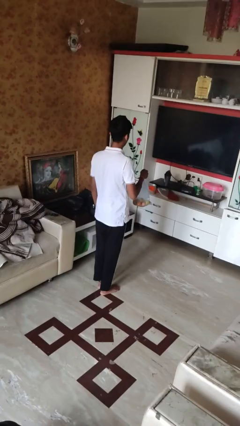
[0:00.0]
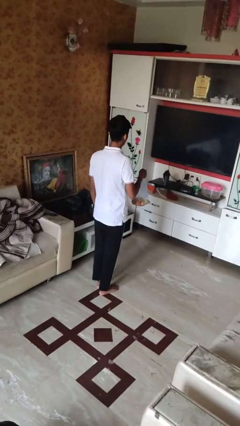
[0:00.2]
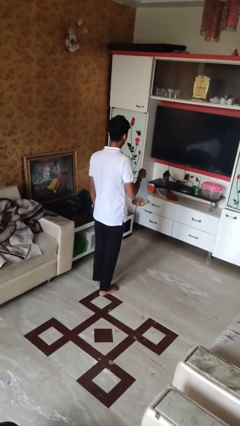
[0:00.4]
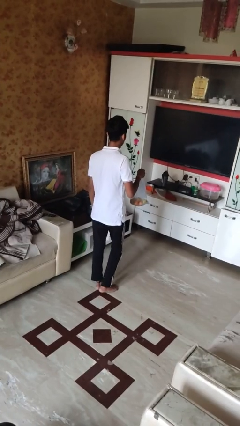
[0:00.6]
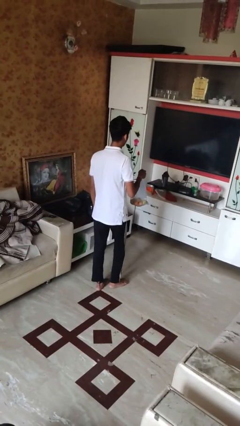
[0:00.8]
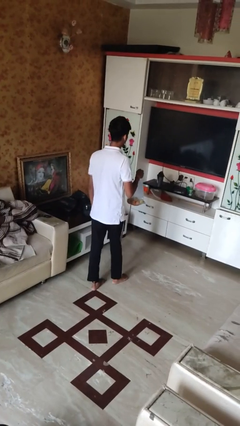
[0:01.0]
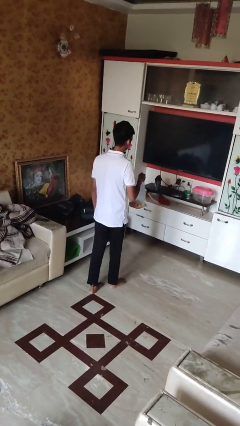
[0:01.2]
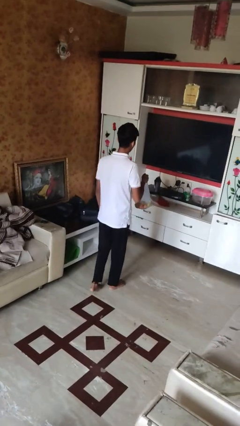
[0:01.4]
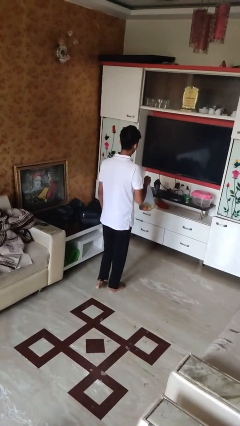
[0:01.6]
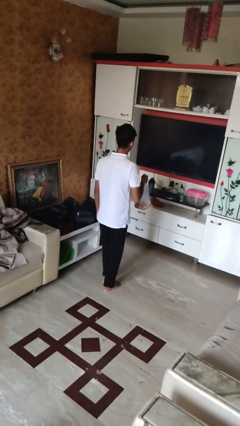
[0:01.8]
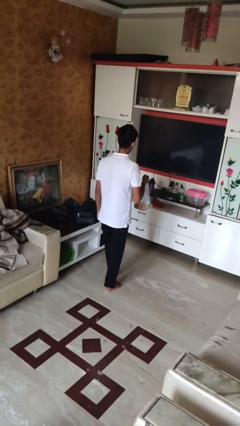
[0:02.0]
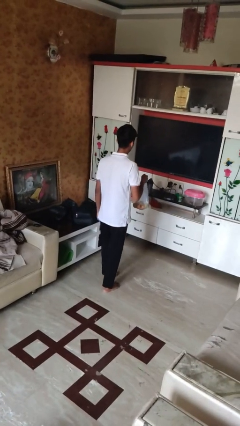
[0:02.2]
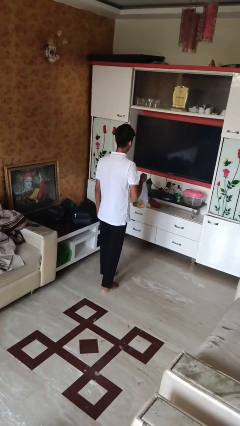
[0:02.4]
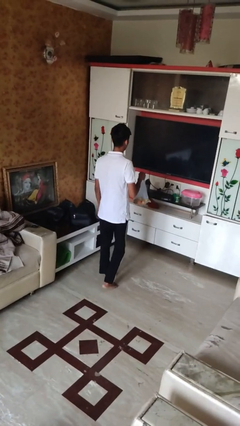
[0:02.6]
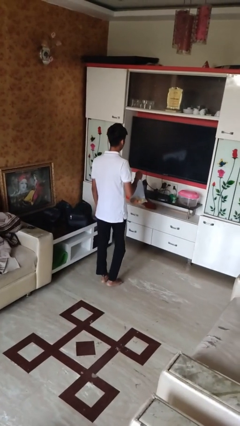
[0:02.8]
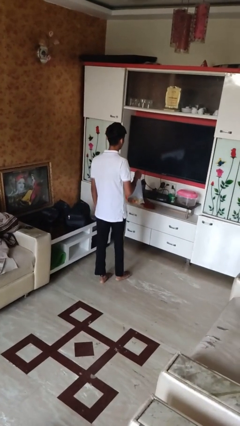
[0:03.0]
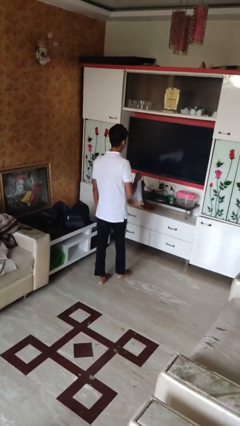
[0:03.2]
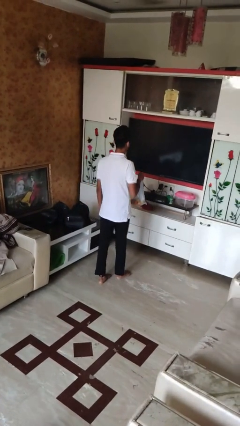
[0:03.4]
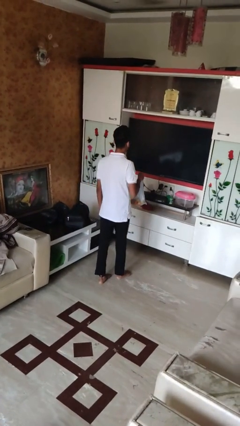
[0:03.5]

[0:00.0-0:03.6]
person carries groceries

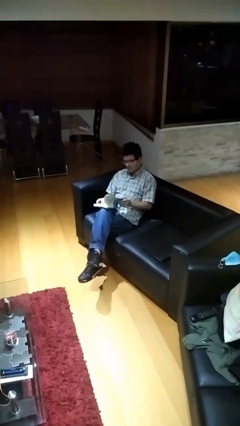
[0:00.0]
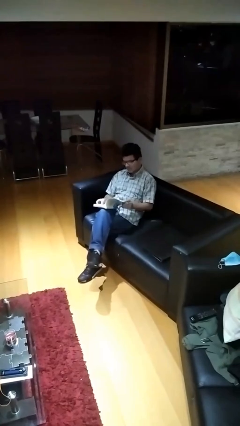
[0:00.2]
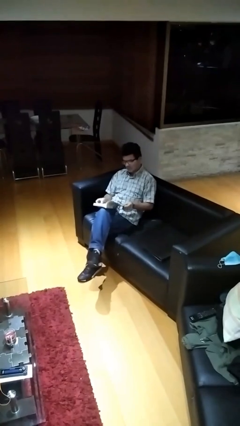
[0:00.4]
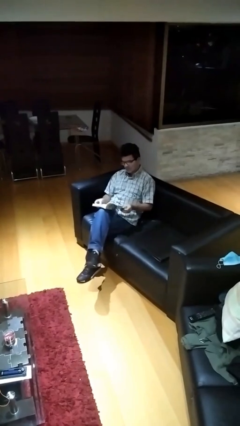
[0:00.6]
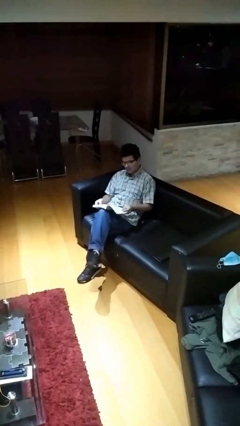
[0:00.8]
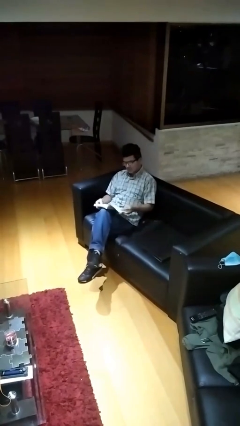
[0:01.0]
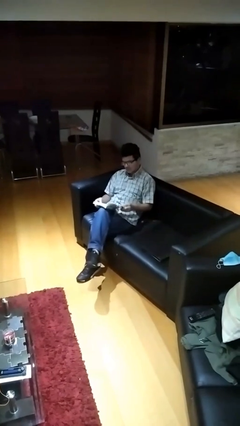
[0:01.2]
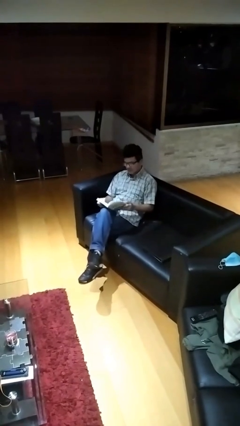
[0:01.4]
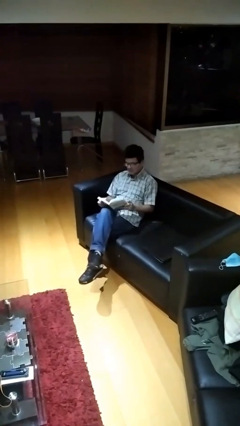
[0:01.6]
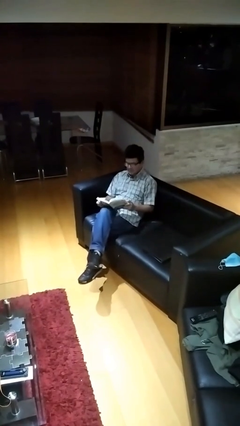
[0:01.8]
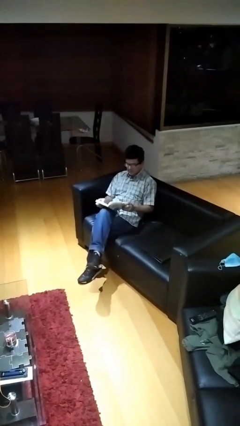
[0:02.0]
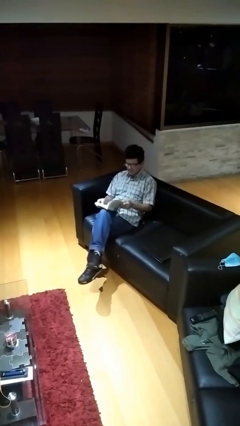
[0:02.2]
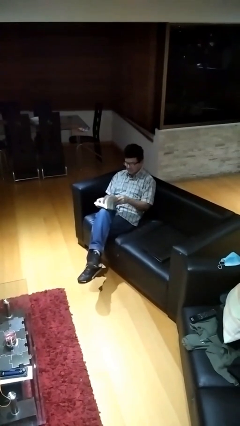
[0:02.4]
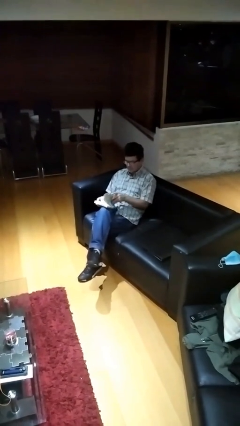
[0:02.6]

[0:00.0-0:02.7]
person reads document

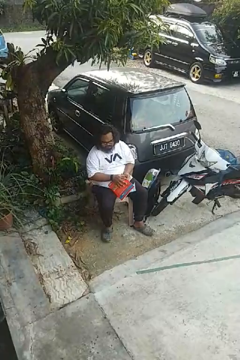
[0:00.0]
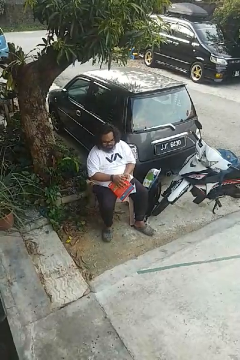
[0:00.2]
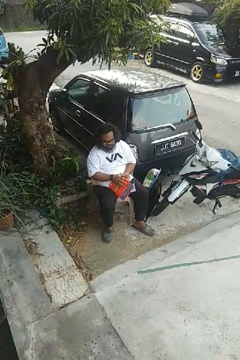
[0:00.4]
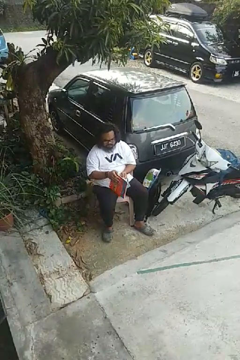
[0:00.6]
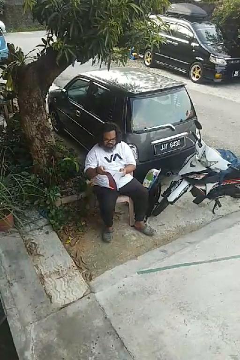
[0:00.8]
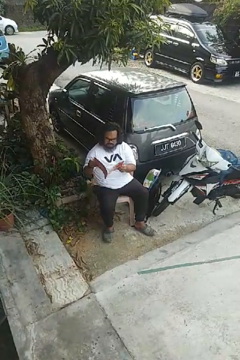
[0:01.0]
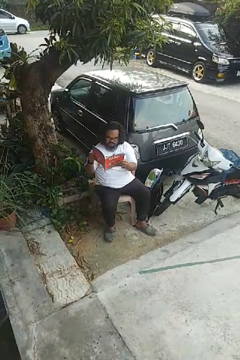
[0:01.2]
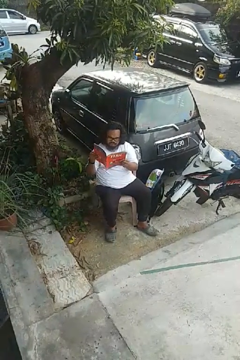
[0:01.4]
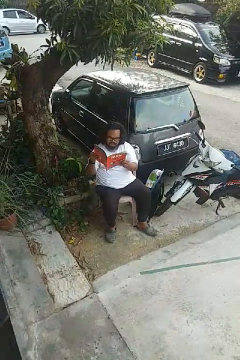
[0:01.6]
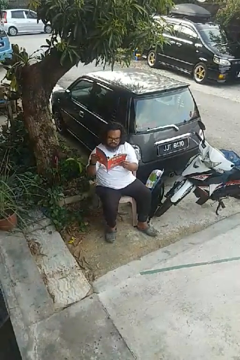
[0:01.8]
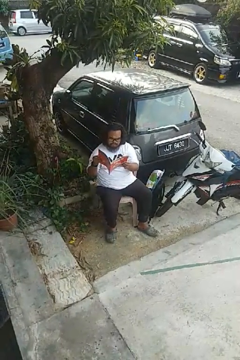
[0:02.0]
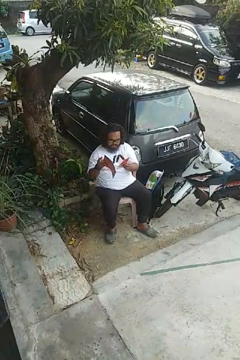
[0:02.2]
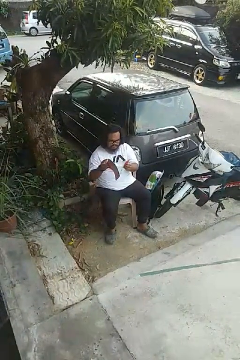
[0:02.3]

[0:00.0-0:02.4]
person reads magazine

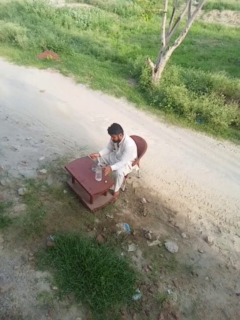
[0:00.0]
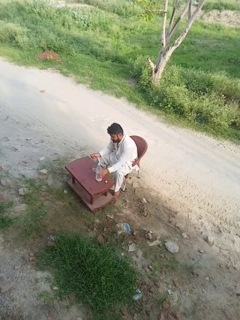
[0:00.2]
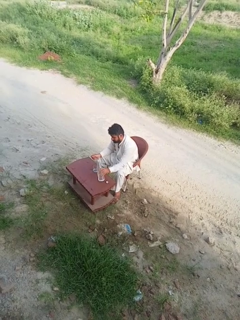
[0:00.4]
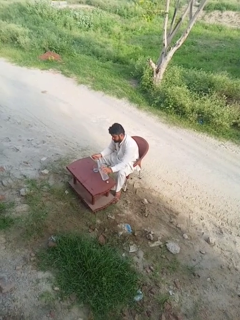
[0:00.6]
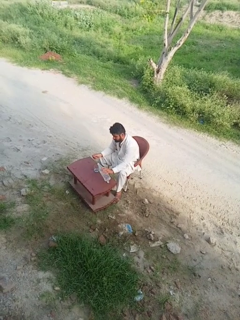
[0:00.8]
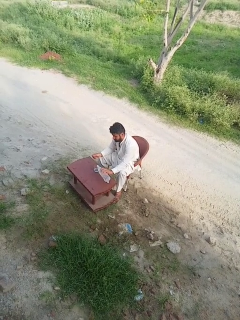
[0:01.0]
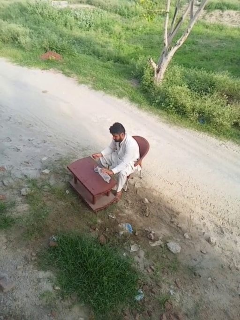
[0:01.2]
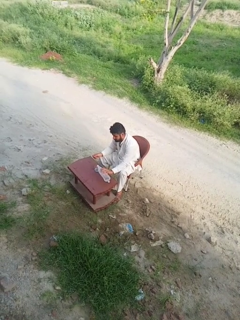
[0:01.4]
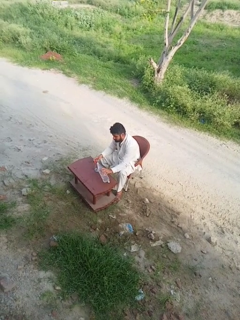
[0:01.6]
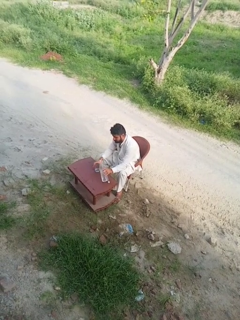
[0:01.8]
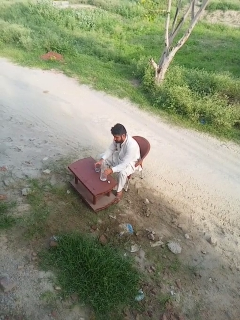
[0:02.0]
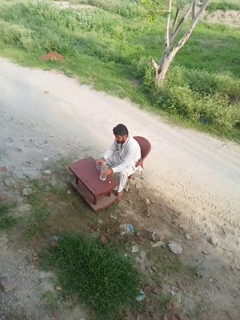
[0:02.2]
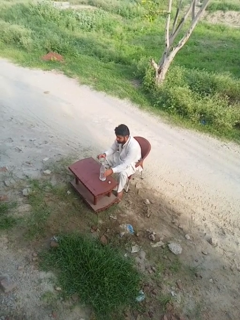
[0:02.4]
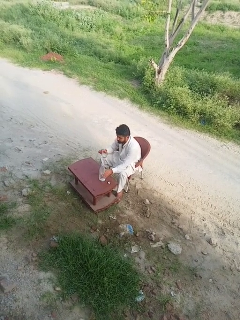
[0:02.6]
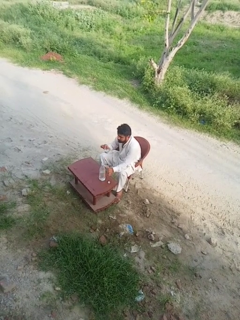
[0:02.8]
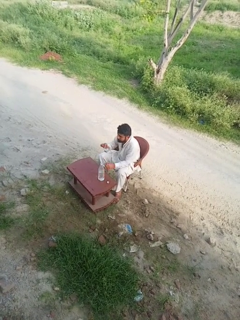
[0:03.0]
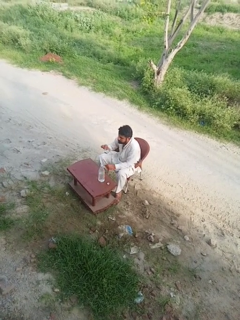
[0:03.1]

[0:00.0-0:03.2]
person picks up object from table

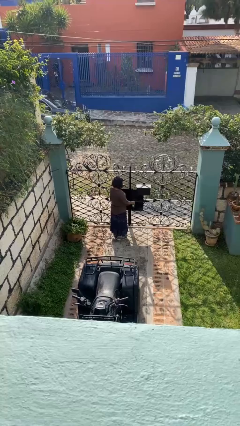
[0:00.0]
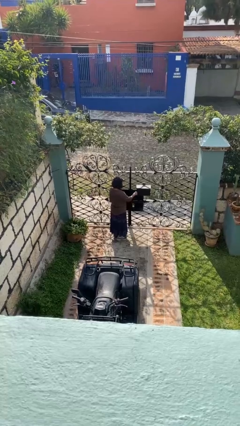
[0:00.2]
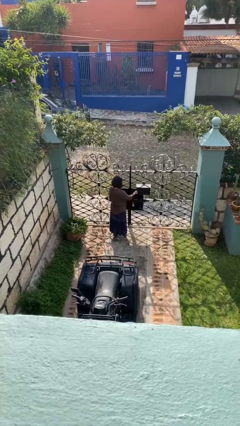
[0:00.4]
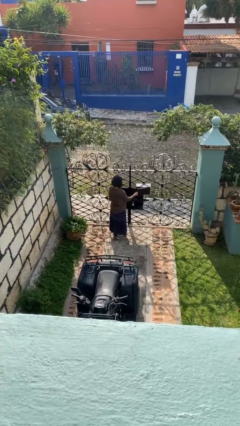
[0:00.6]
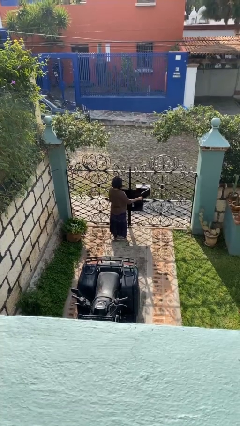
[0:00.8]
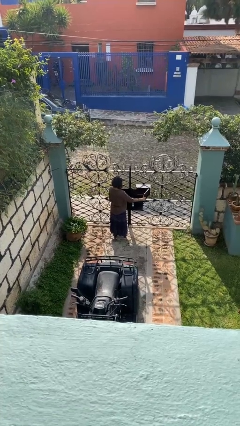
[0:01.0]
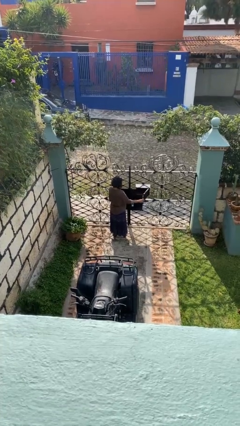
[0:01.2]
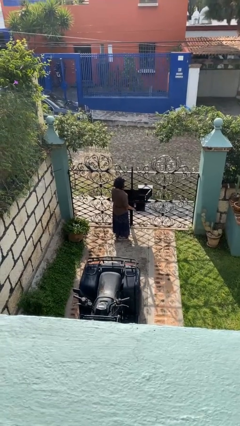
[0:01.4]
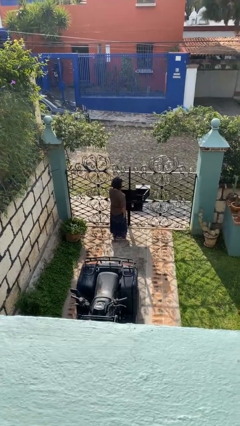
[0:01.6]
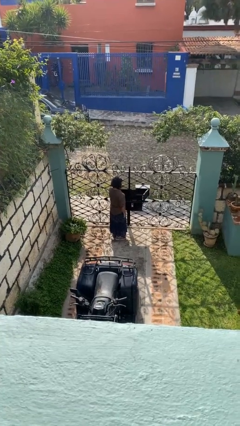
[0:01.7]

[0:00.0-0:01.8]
person opens mailbox

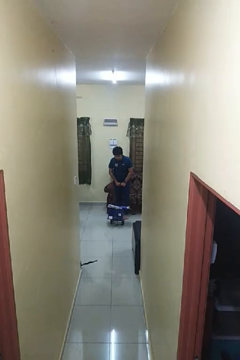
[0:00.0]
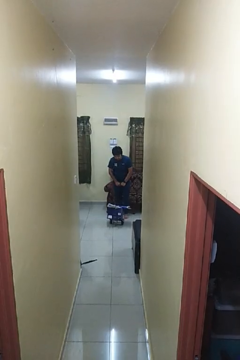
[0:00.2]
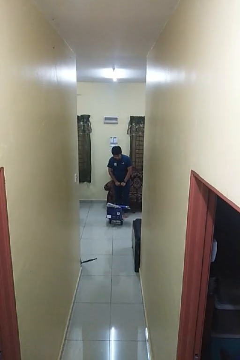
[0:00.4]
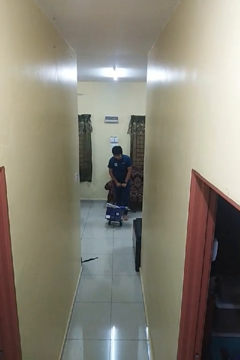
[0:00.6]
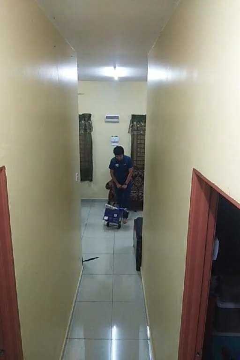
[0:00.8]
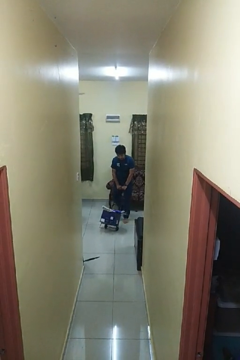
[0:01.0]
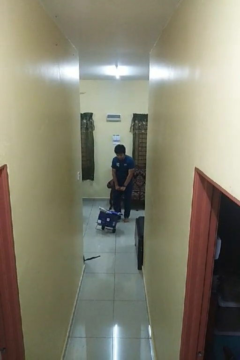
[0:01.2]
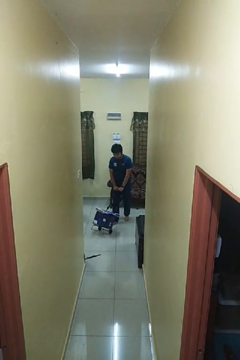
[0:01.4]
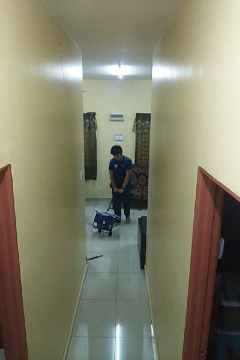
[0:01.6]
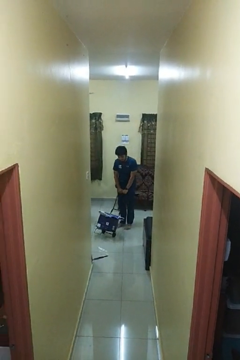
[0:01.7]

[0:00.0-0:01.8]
person pushes wheeled cart

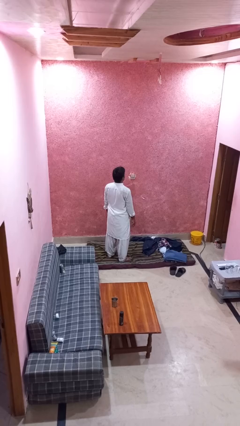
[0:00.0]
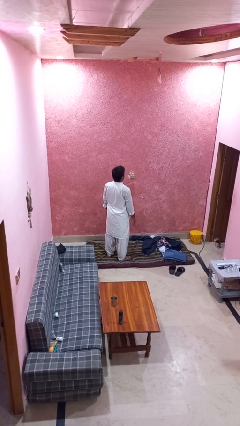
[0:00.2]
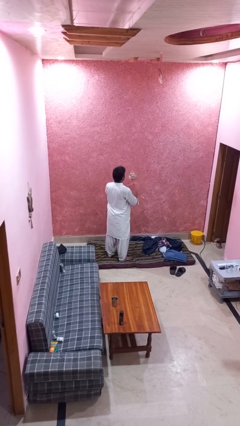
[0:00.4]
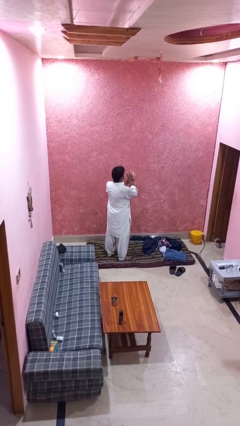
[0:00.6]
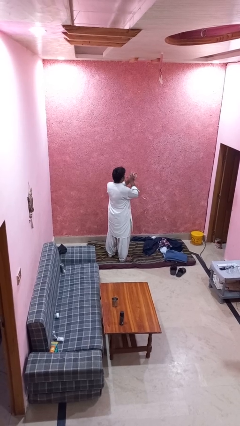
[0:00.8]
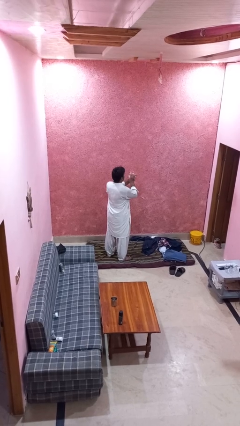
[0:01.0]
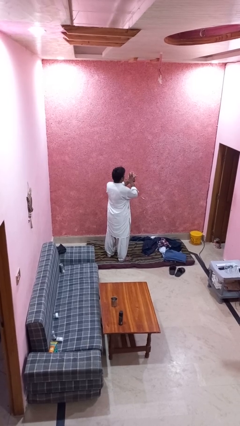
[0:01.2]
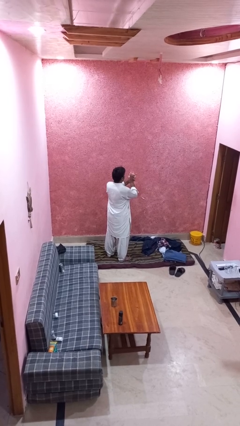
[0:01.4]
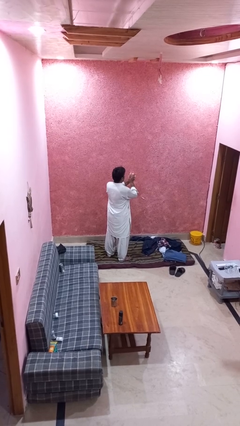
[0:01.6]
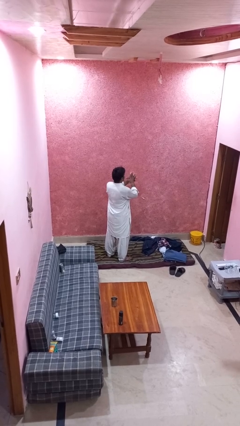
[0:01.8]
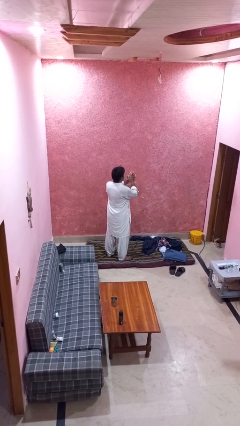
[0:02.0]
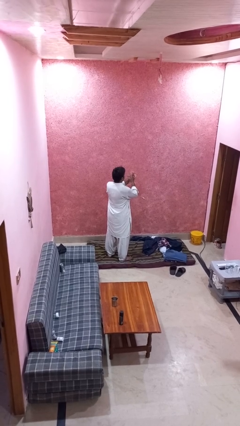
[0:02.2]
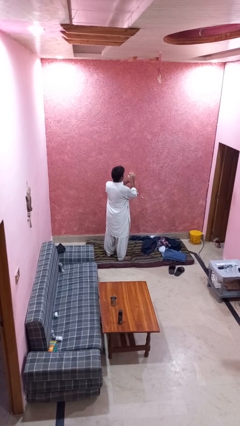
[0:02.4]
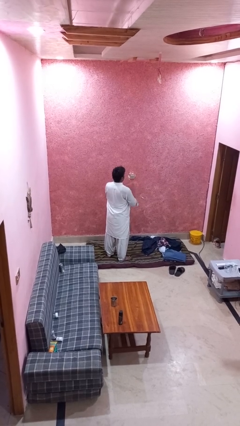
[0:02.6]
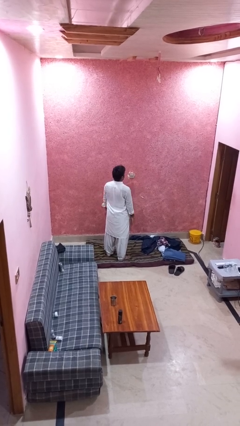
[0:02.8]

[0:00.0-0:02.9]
person snaps fingers

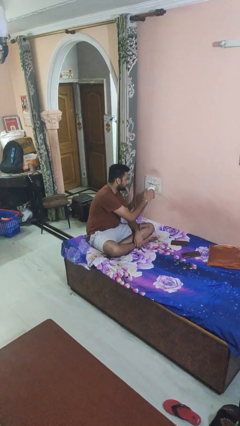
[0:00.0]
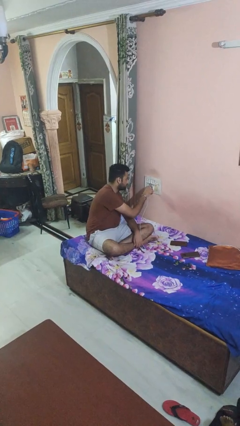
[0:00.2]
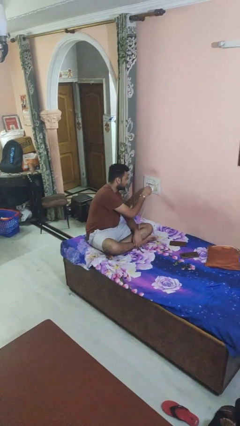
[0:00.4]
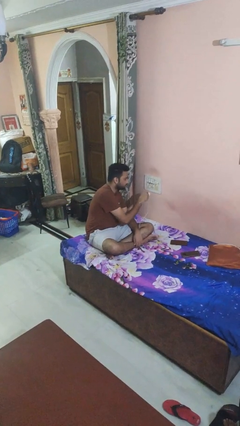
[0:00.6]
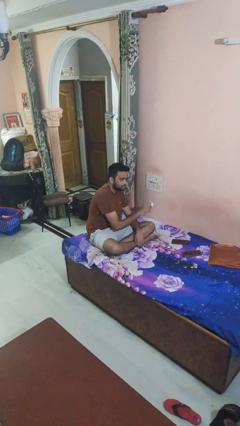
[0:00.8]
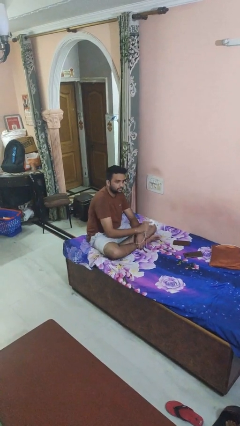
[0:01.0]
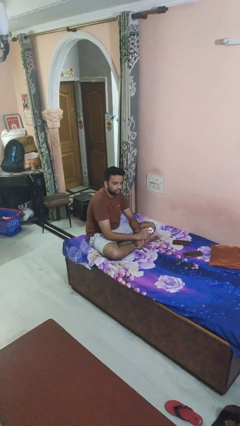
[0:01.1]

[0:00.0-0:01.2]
person unplugs from electrical socket
